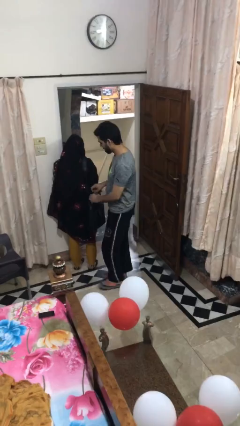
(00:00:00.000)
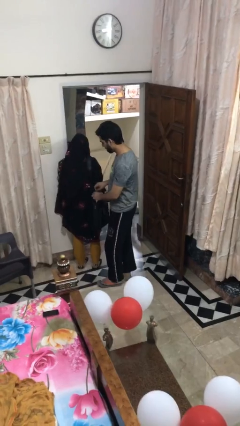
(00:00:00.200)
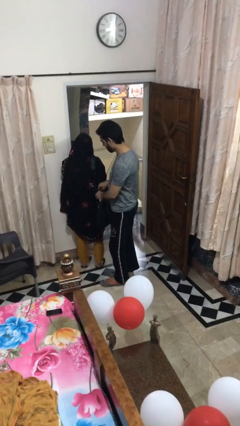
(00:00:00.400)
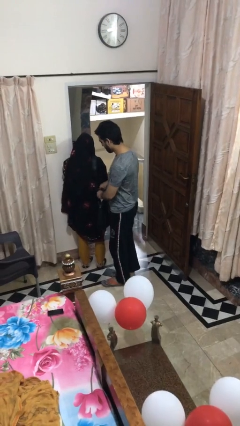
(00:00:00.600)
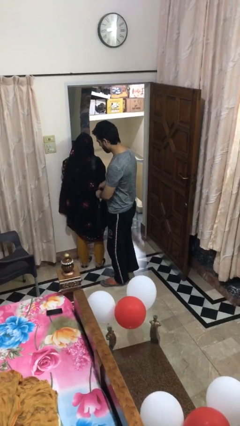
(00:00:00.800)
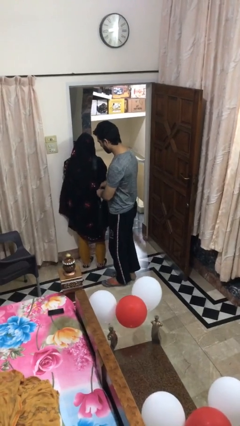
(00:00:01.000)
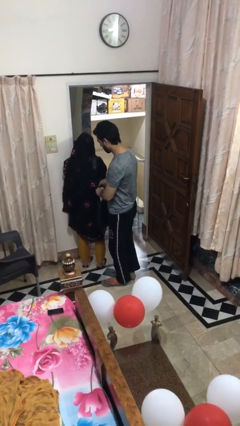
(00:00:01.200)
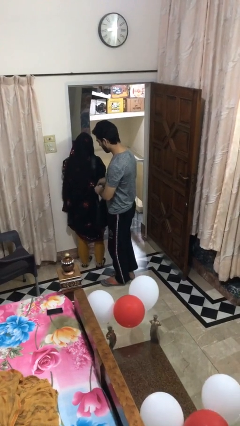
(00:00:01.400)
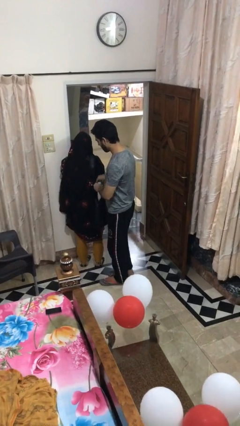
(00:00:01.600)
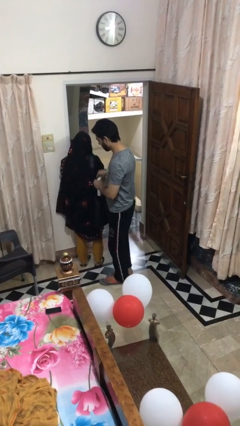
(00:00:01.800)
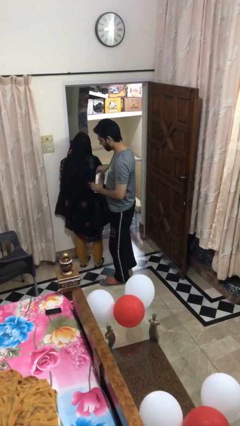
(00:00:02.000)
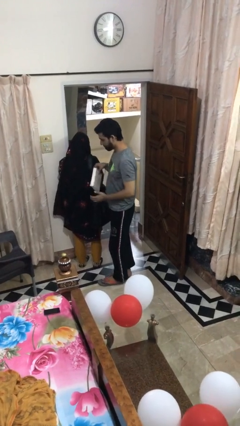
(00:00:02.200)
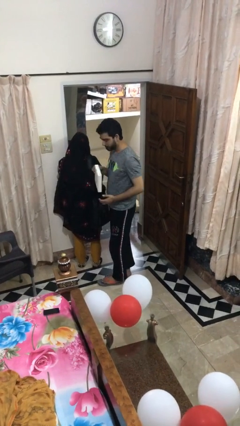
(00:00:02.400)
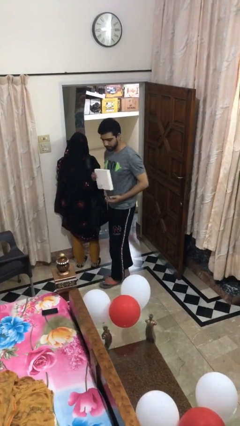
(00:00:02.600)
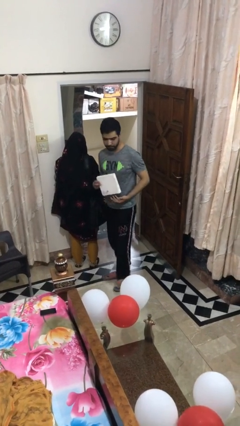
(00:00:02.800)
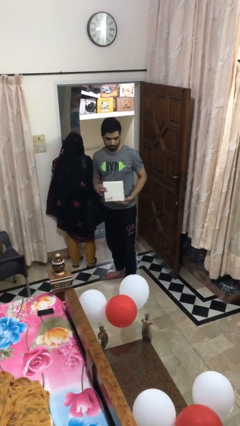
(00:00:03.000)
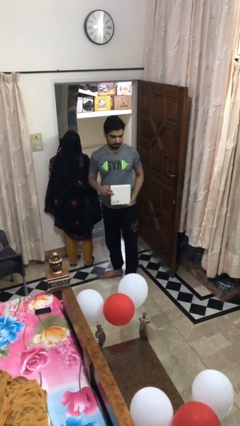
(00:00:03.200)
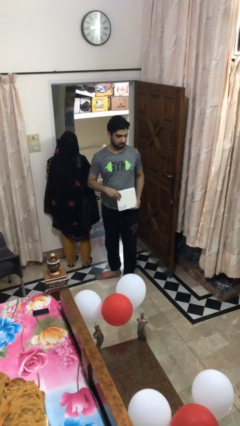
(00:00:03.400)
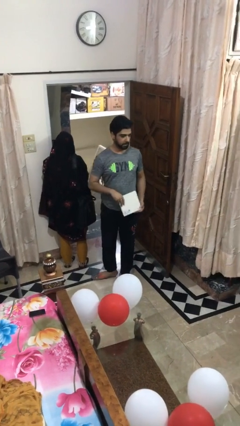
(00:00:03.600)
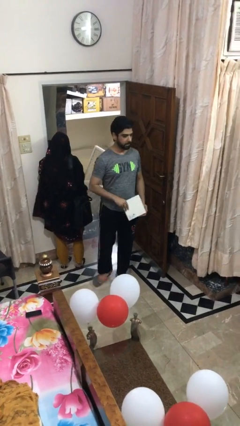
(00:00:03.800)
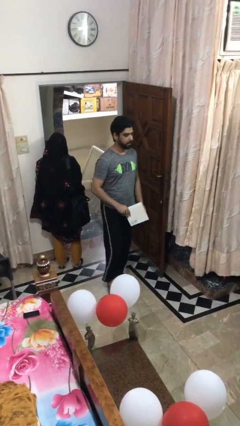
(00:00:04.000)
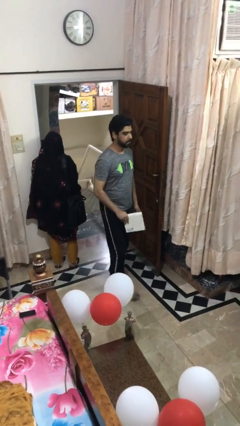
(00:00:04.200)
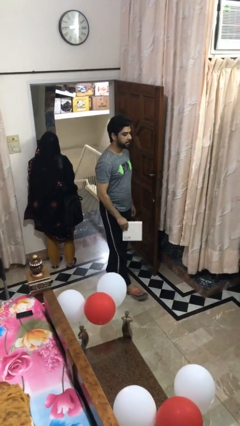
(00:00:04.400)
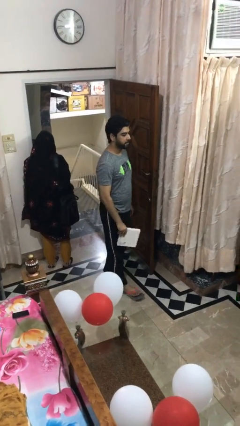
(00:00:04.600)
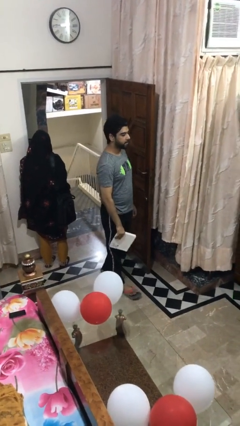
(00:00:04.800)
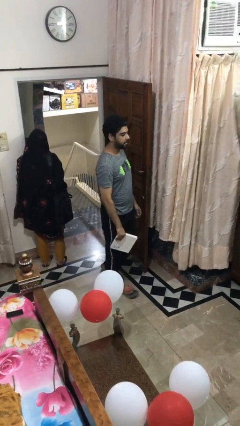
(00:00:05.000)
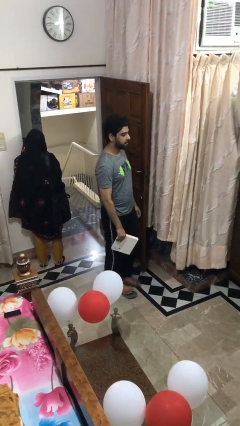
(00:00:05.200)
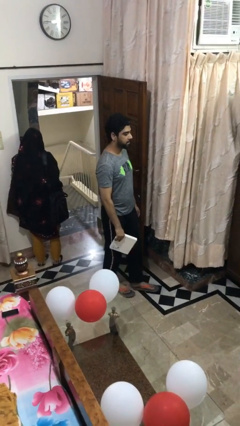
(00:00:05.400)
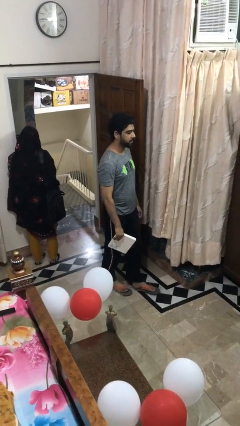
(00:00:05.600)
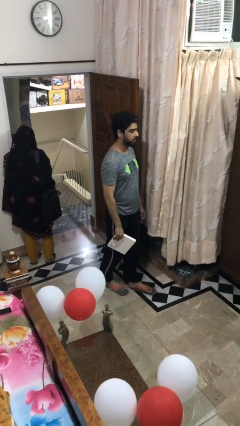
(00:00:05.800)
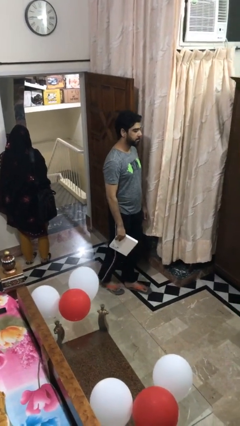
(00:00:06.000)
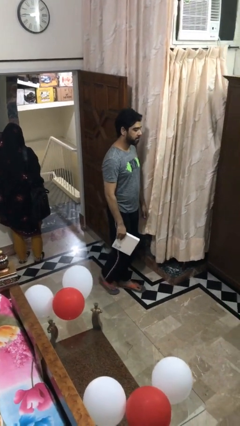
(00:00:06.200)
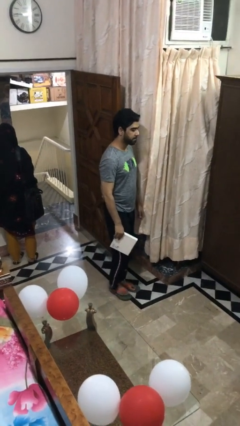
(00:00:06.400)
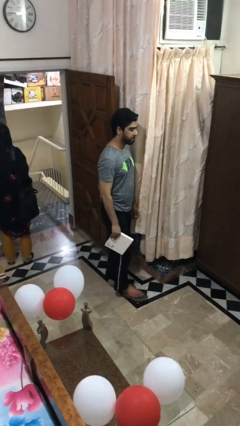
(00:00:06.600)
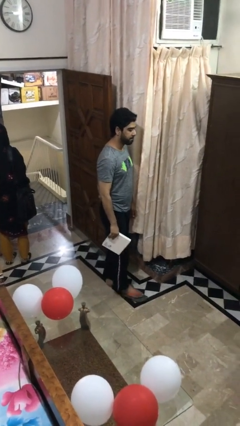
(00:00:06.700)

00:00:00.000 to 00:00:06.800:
person steals object from person

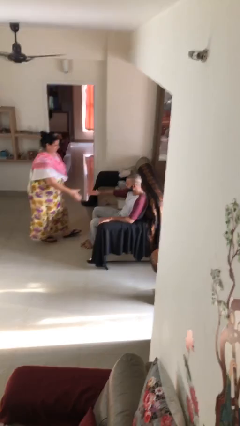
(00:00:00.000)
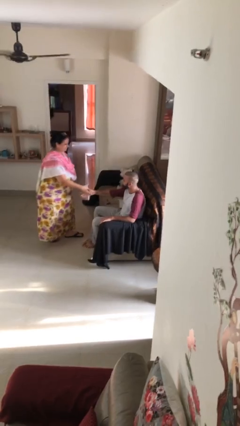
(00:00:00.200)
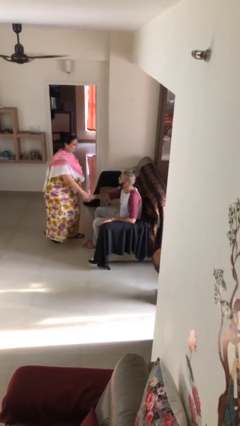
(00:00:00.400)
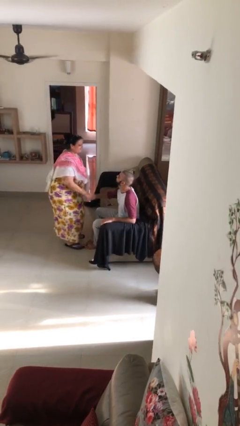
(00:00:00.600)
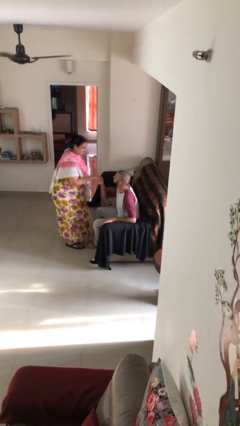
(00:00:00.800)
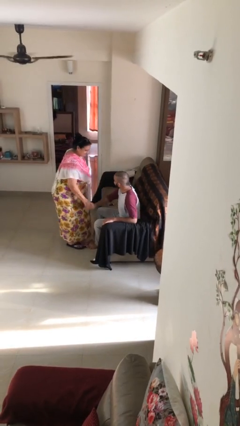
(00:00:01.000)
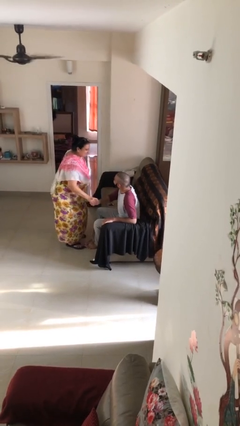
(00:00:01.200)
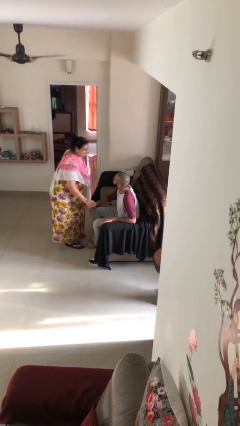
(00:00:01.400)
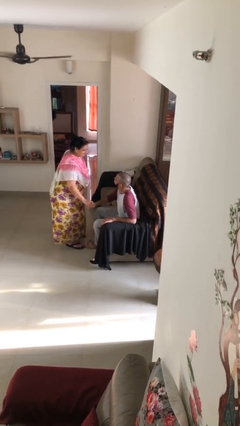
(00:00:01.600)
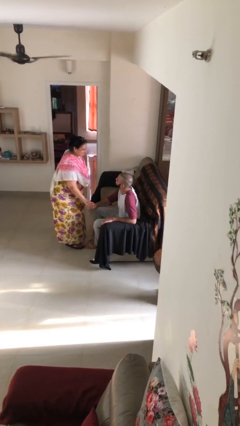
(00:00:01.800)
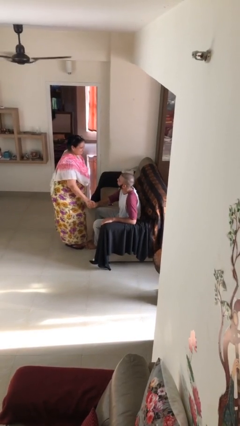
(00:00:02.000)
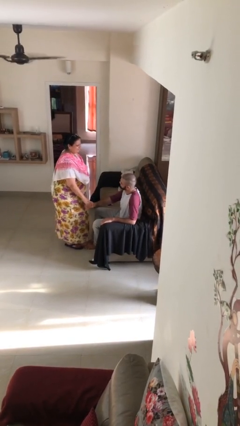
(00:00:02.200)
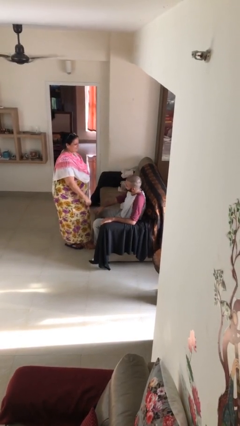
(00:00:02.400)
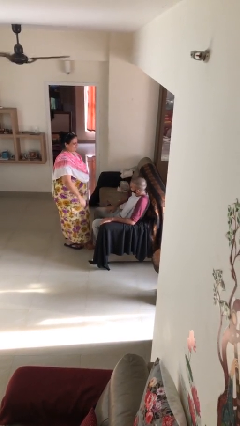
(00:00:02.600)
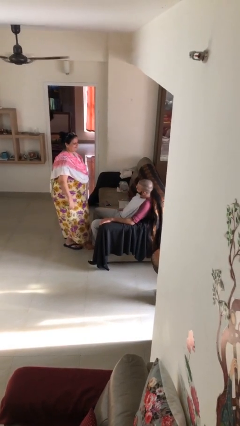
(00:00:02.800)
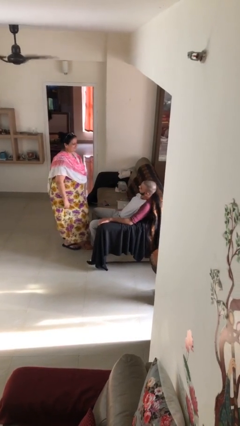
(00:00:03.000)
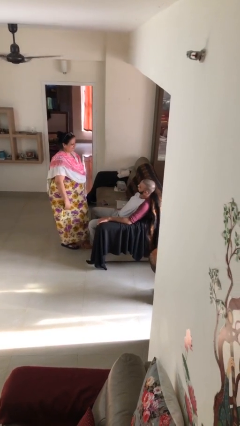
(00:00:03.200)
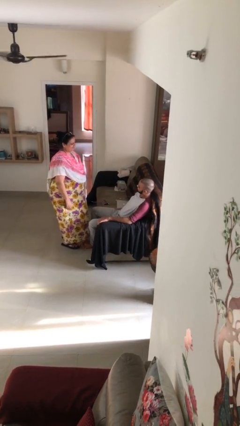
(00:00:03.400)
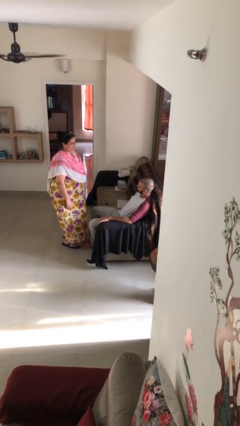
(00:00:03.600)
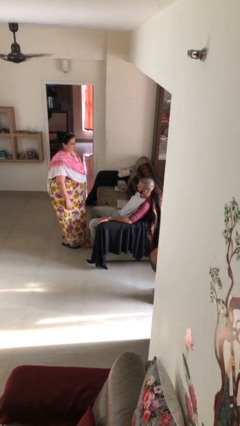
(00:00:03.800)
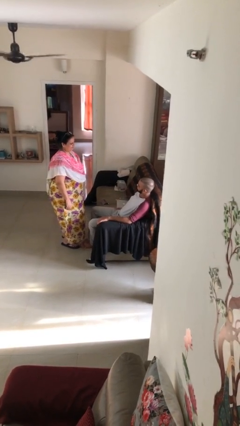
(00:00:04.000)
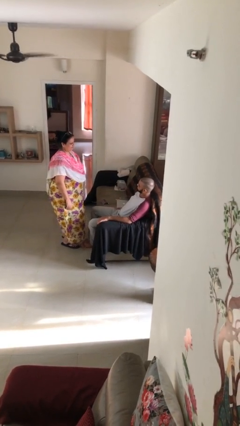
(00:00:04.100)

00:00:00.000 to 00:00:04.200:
person shakes hand

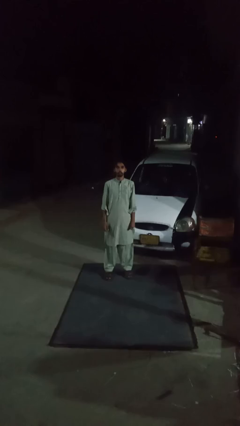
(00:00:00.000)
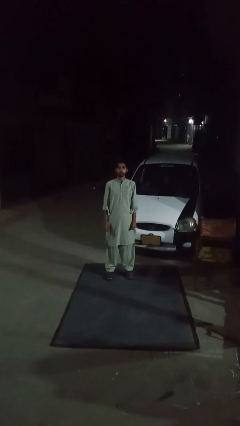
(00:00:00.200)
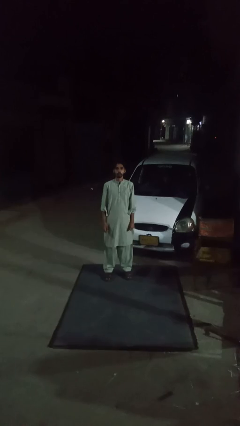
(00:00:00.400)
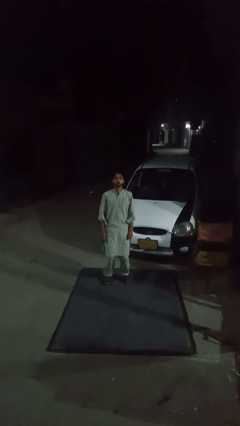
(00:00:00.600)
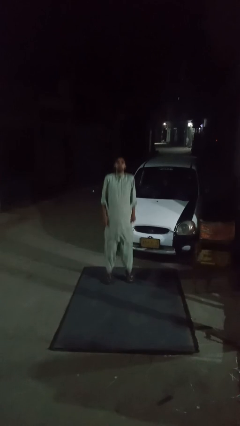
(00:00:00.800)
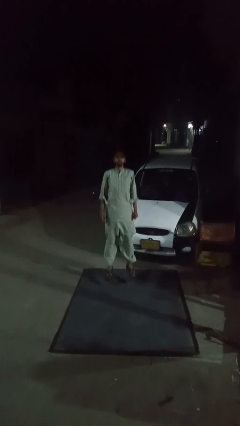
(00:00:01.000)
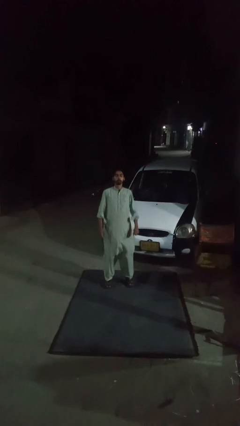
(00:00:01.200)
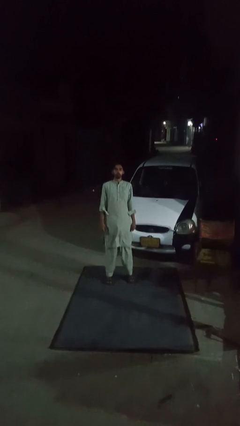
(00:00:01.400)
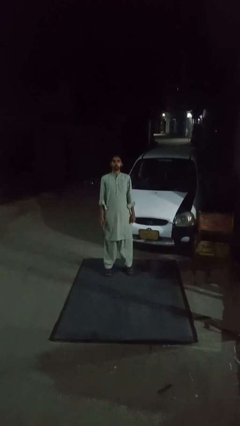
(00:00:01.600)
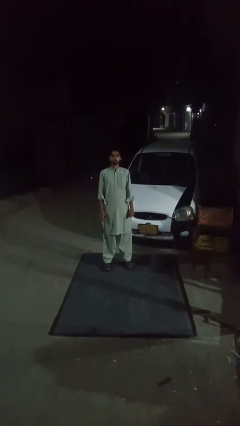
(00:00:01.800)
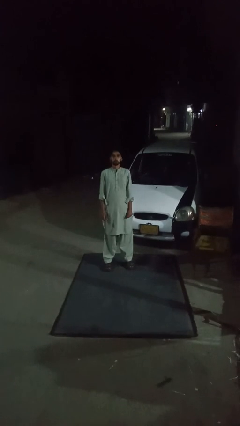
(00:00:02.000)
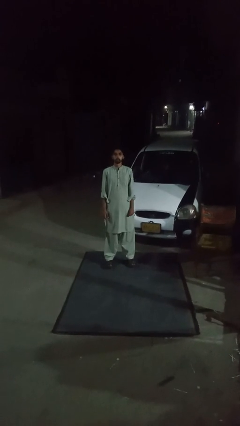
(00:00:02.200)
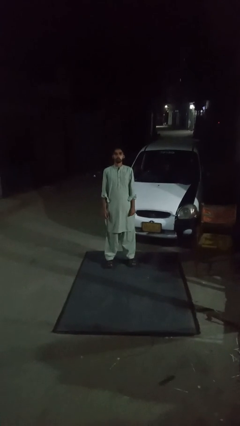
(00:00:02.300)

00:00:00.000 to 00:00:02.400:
person exercises with jumping jacks

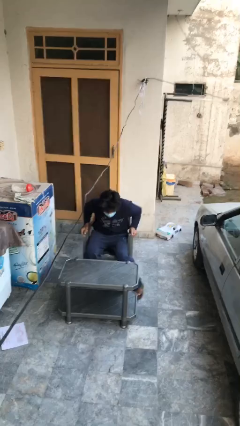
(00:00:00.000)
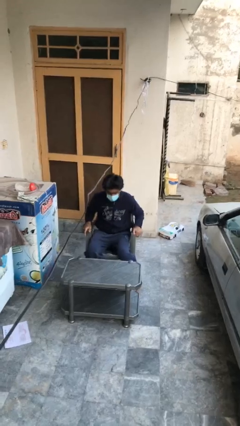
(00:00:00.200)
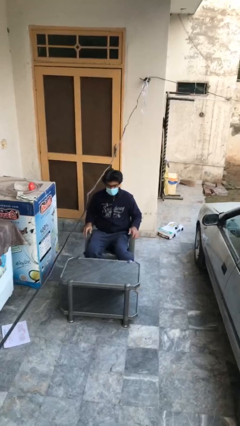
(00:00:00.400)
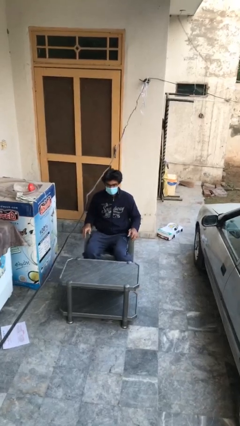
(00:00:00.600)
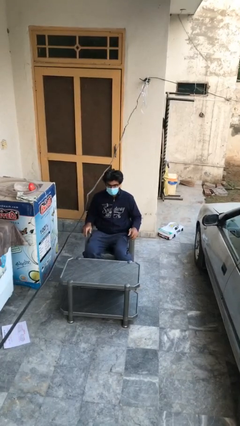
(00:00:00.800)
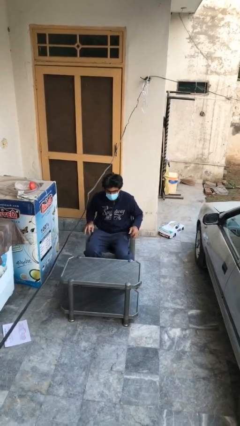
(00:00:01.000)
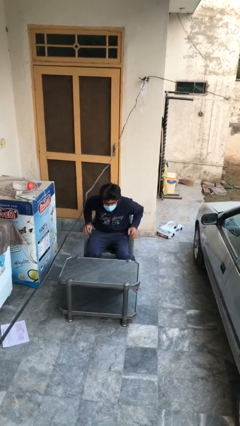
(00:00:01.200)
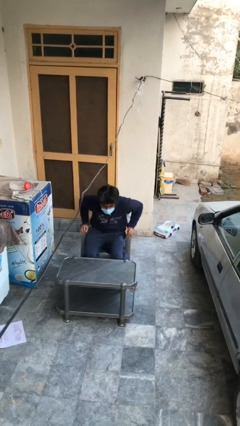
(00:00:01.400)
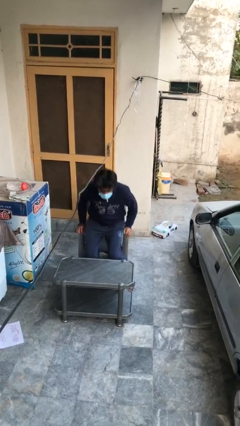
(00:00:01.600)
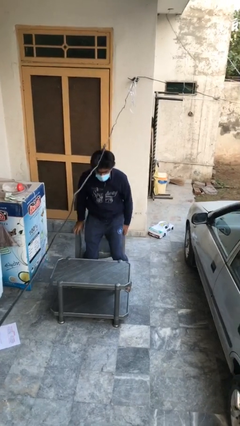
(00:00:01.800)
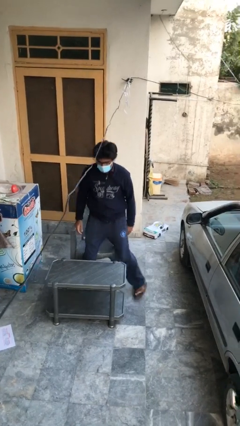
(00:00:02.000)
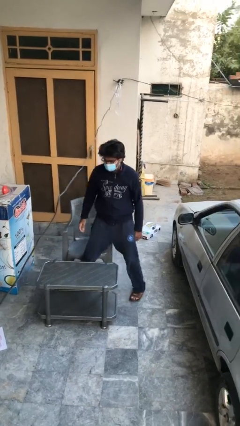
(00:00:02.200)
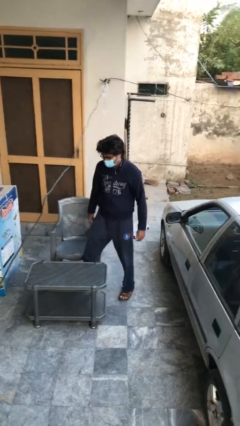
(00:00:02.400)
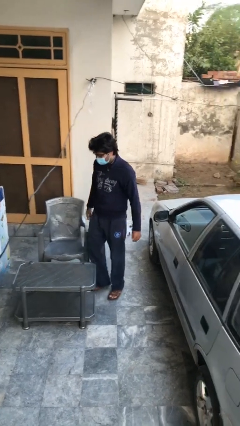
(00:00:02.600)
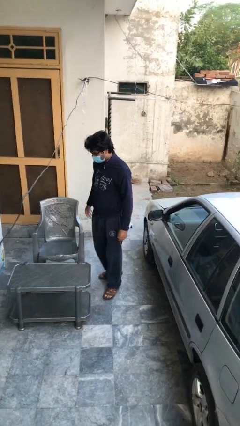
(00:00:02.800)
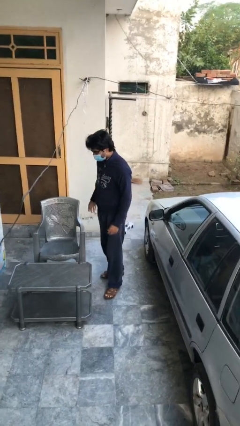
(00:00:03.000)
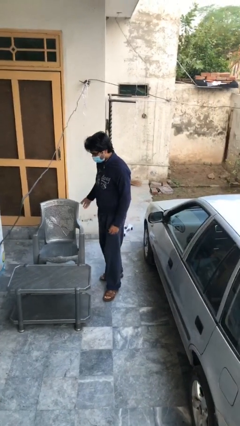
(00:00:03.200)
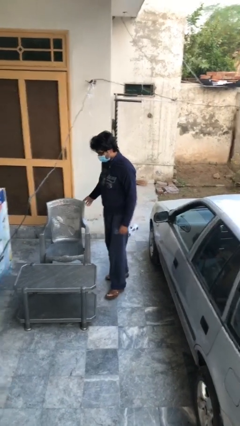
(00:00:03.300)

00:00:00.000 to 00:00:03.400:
person stands up

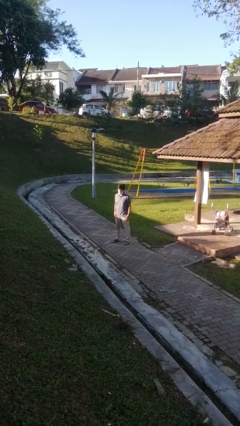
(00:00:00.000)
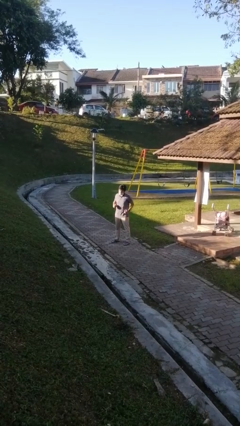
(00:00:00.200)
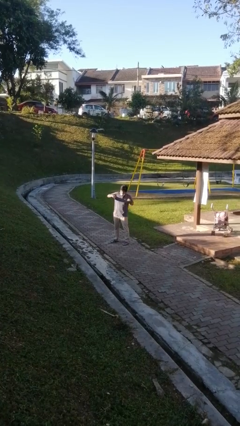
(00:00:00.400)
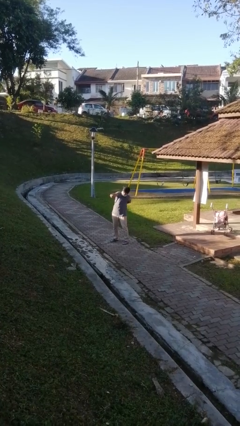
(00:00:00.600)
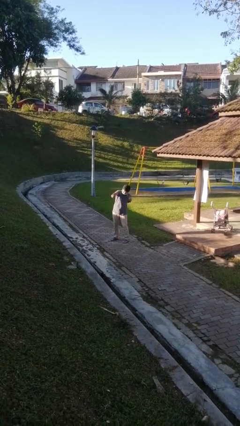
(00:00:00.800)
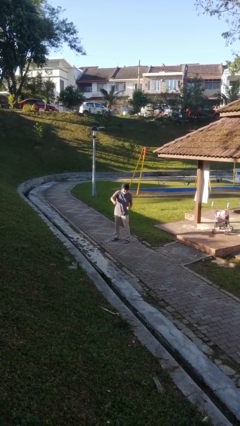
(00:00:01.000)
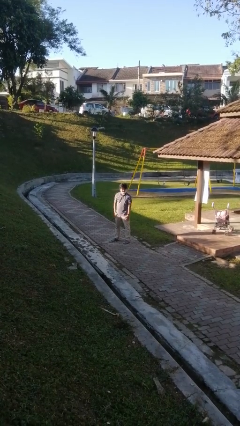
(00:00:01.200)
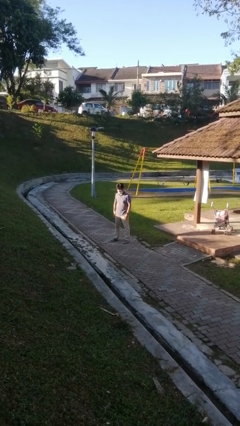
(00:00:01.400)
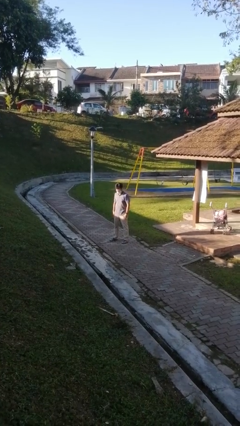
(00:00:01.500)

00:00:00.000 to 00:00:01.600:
person punches